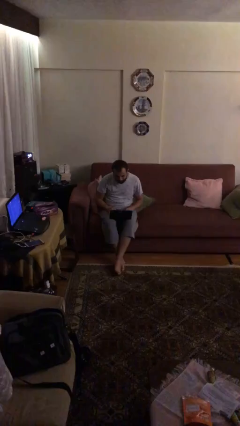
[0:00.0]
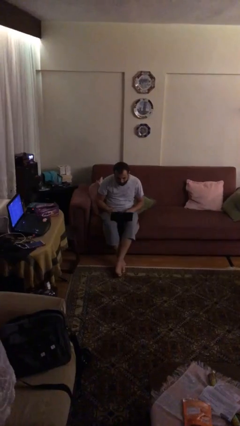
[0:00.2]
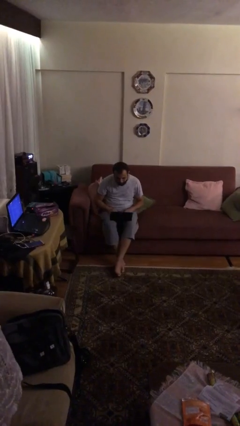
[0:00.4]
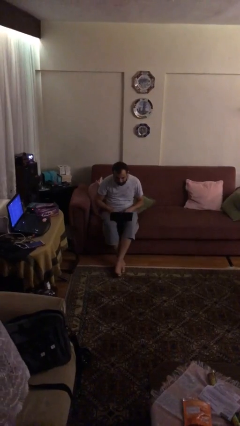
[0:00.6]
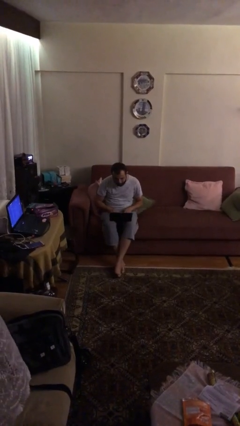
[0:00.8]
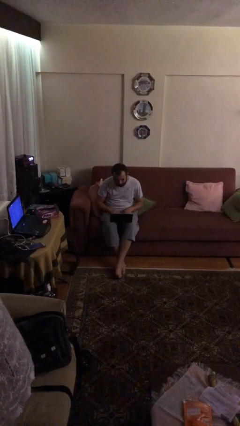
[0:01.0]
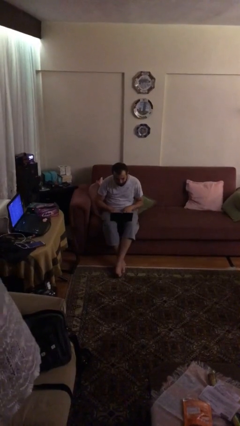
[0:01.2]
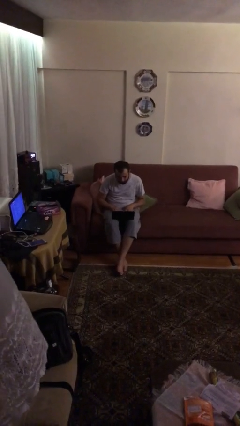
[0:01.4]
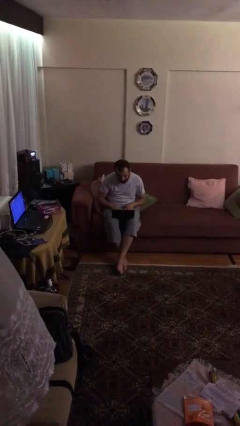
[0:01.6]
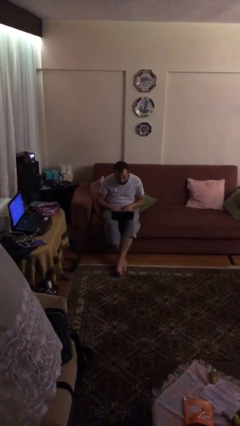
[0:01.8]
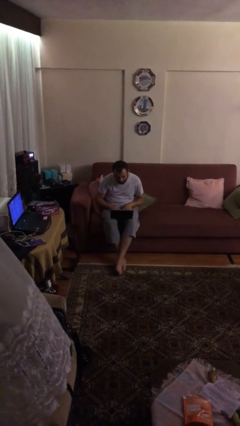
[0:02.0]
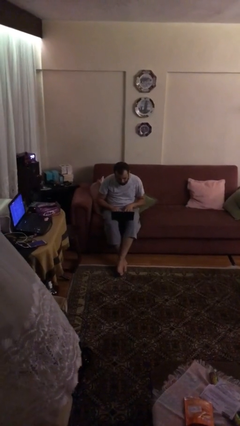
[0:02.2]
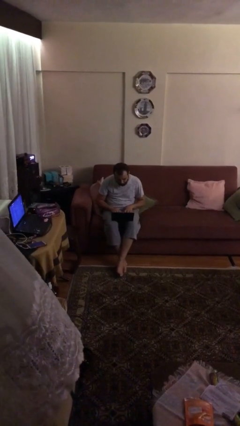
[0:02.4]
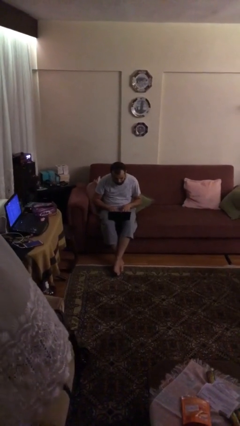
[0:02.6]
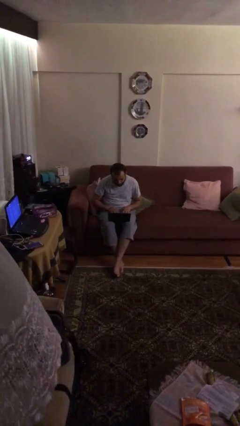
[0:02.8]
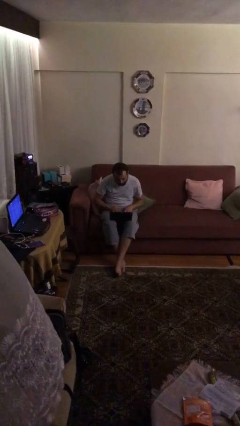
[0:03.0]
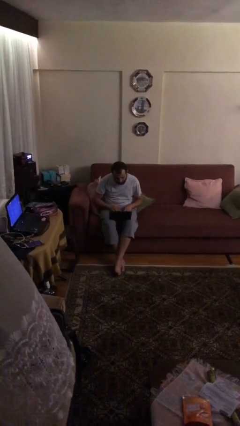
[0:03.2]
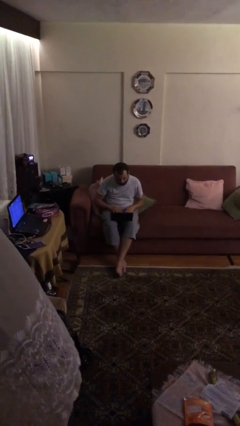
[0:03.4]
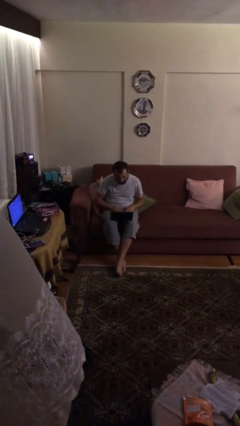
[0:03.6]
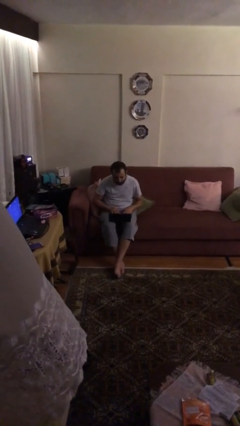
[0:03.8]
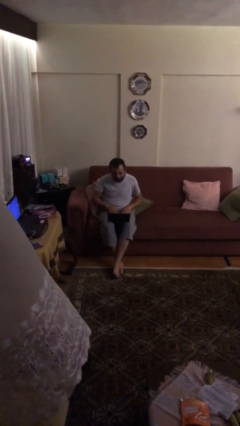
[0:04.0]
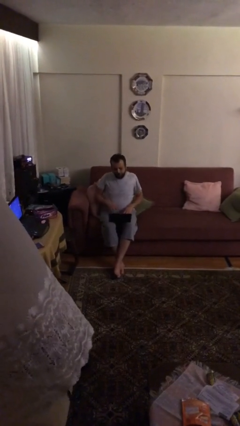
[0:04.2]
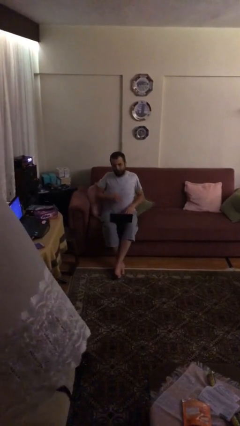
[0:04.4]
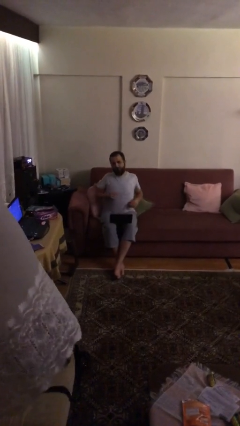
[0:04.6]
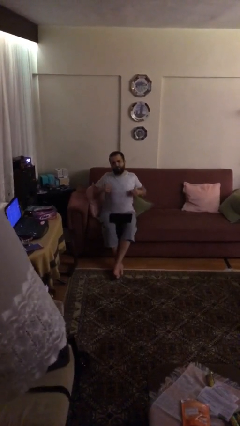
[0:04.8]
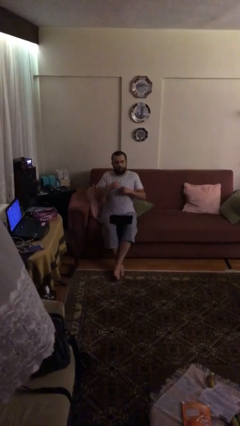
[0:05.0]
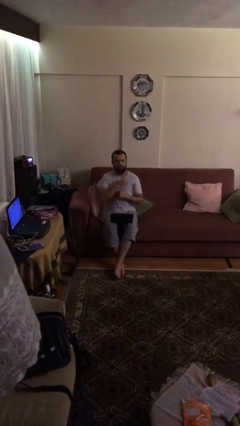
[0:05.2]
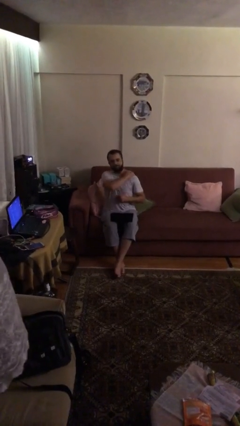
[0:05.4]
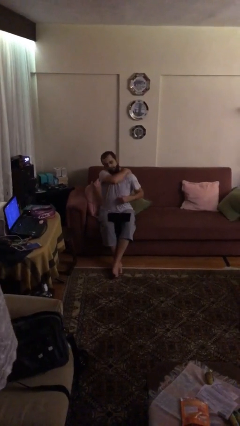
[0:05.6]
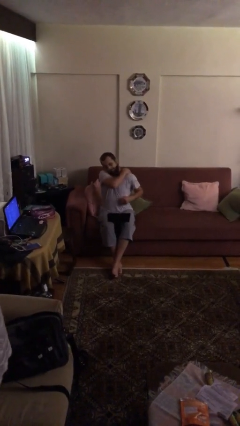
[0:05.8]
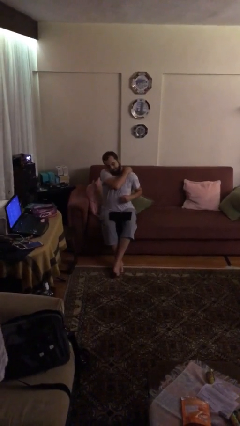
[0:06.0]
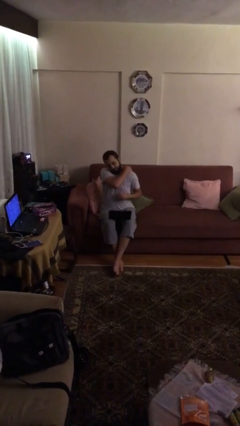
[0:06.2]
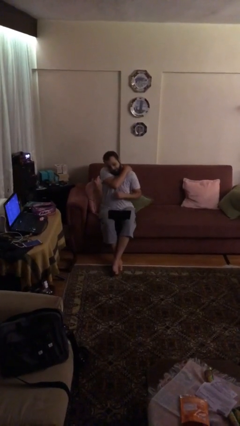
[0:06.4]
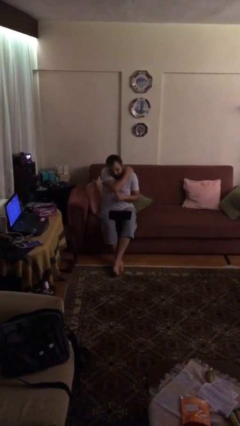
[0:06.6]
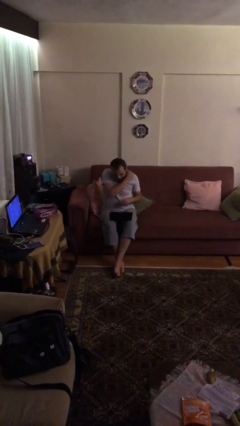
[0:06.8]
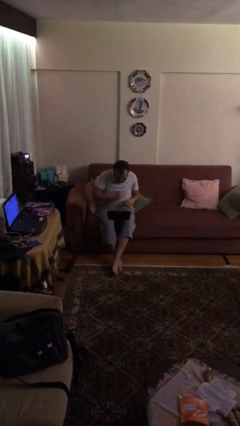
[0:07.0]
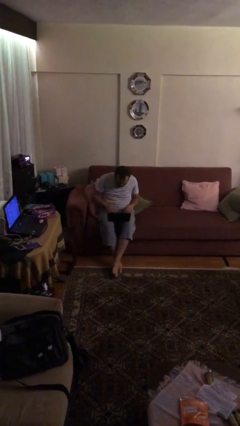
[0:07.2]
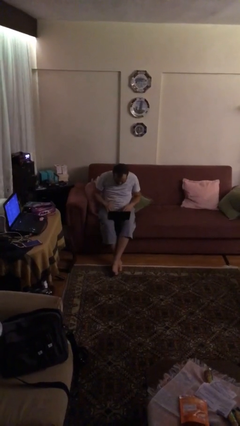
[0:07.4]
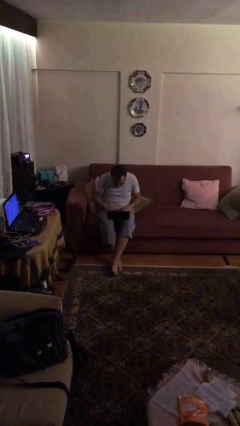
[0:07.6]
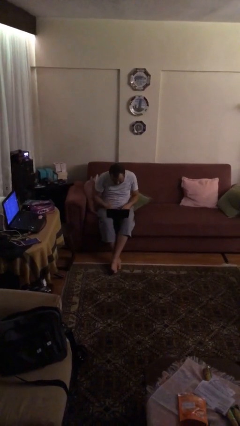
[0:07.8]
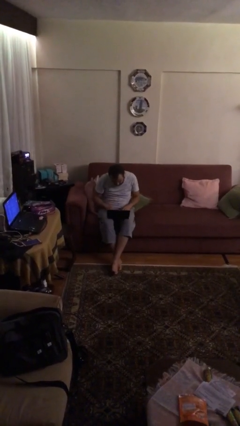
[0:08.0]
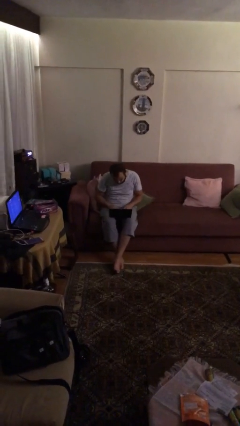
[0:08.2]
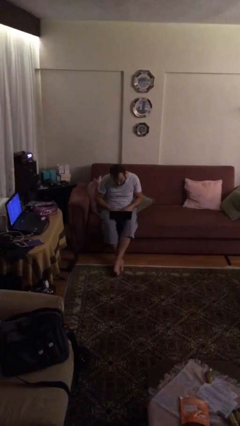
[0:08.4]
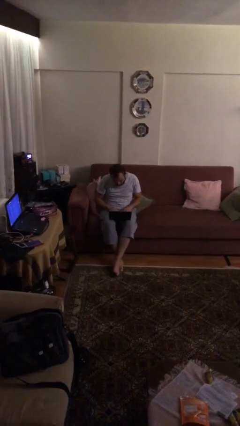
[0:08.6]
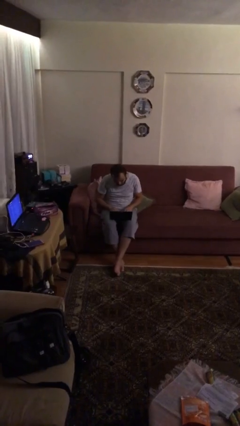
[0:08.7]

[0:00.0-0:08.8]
person interacts with laptop

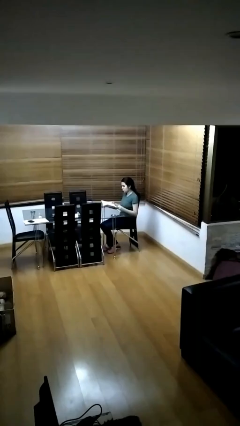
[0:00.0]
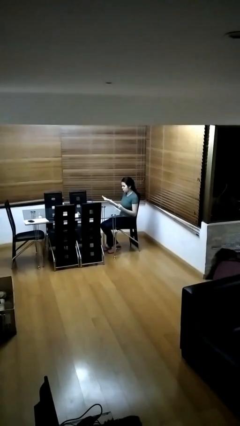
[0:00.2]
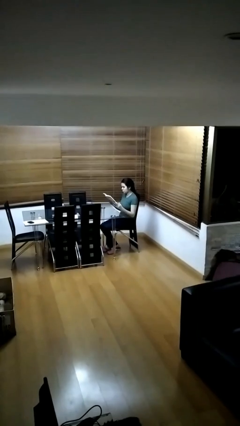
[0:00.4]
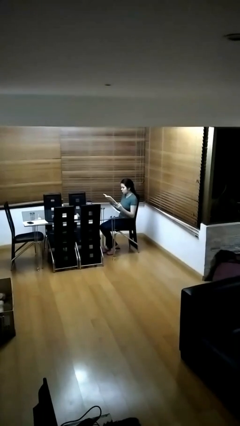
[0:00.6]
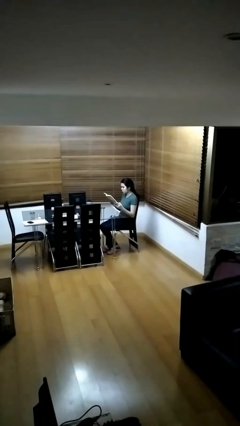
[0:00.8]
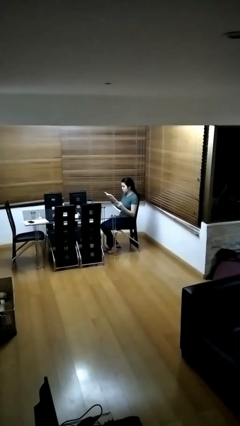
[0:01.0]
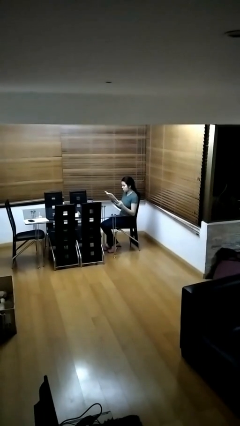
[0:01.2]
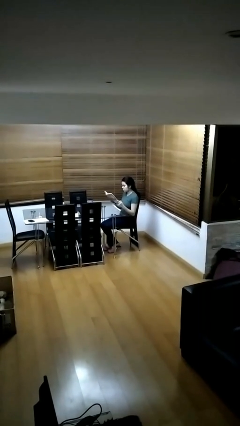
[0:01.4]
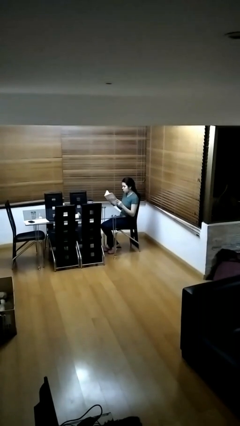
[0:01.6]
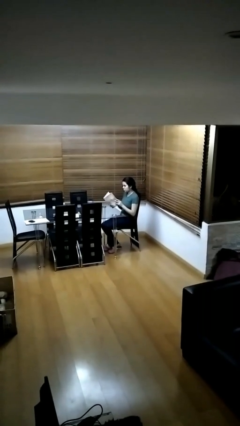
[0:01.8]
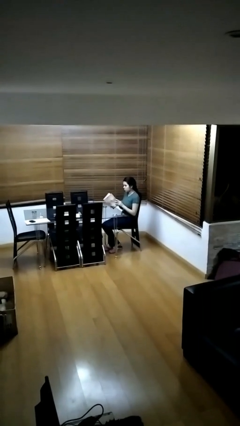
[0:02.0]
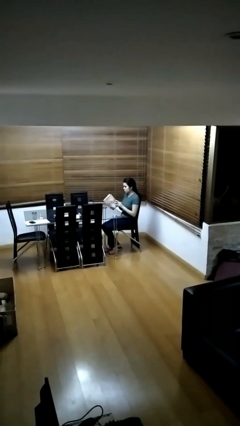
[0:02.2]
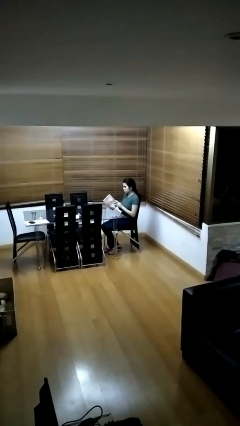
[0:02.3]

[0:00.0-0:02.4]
person reads document

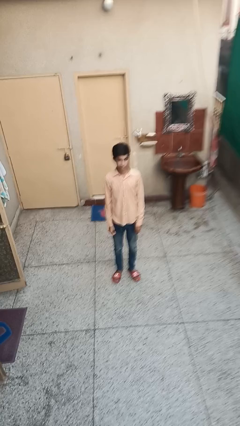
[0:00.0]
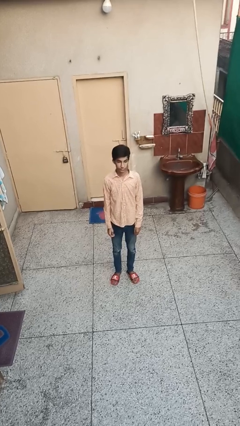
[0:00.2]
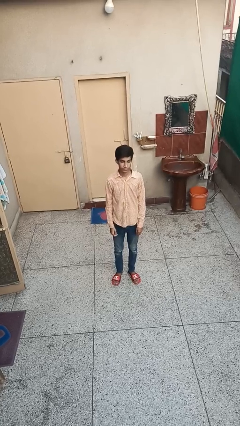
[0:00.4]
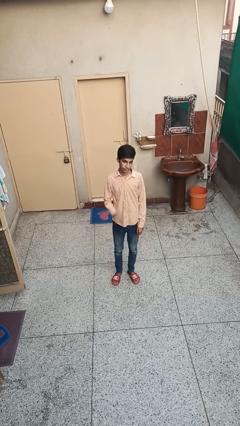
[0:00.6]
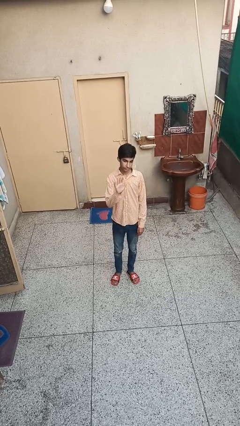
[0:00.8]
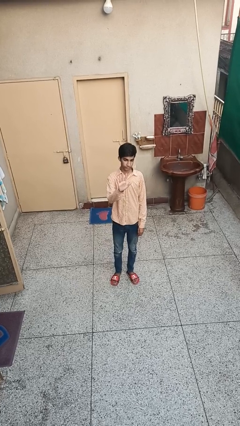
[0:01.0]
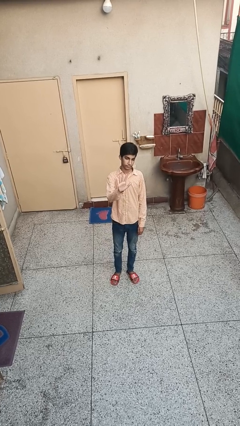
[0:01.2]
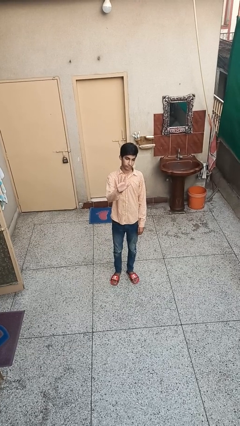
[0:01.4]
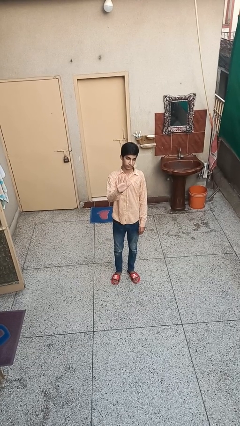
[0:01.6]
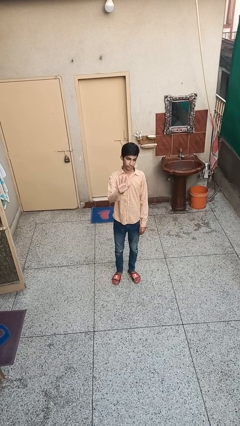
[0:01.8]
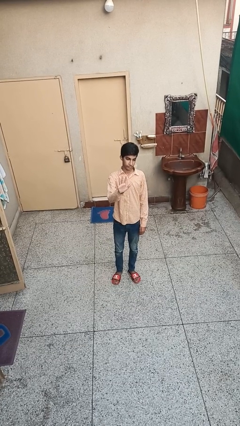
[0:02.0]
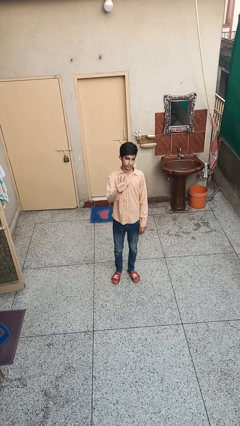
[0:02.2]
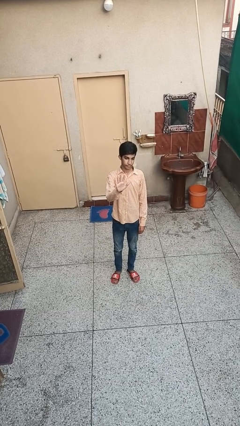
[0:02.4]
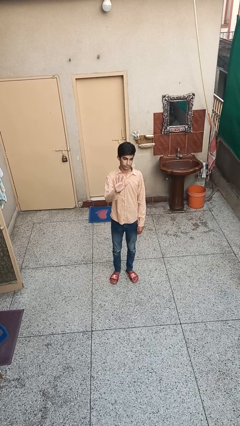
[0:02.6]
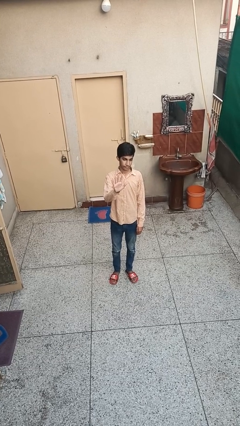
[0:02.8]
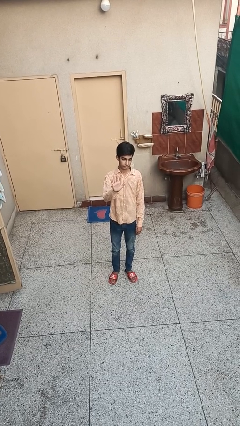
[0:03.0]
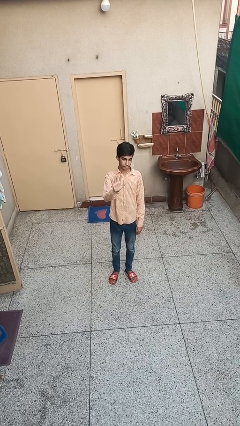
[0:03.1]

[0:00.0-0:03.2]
person gestures number five

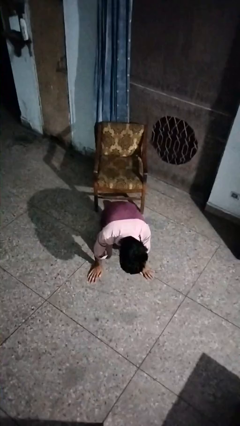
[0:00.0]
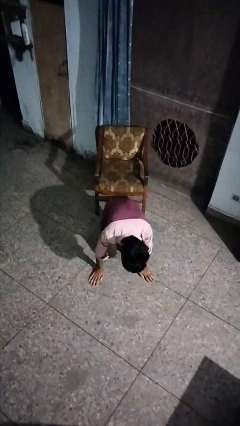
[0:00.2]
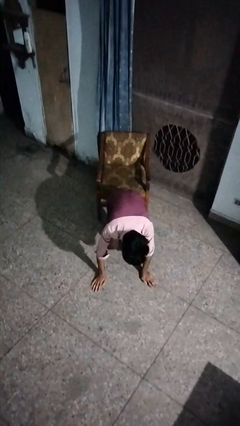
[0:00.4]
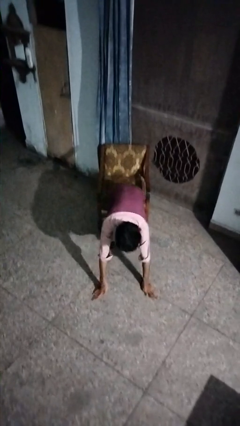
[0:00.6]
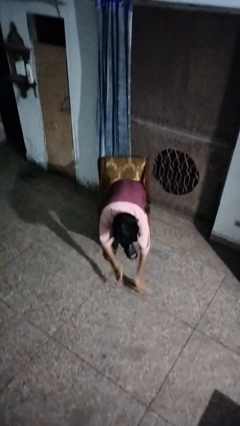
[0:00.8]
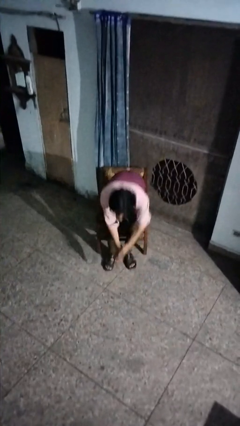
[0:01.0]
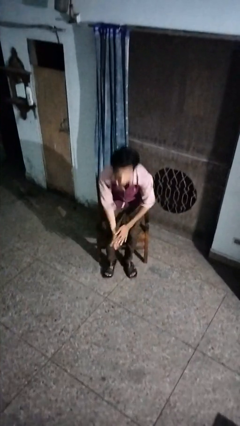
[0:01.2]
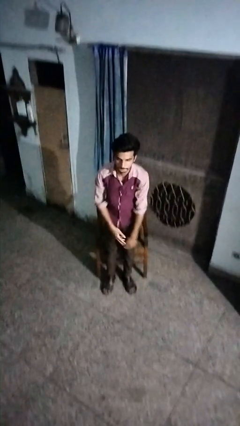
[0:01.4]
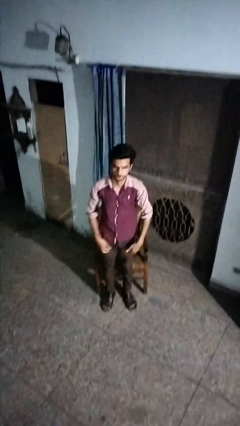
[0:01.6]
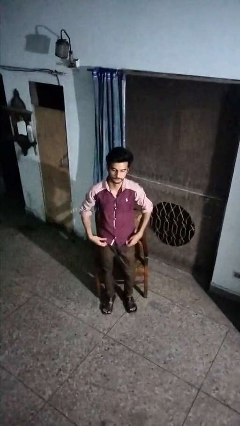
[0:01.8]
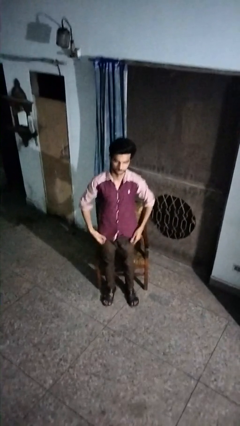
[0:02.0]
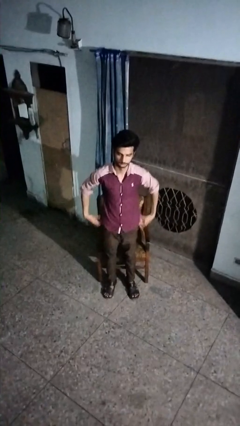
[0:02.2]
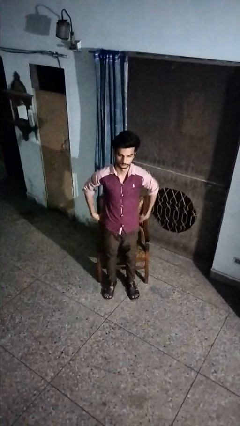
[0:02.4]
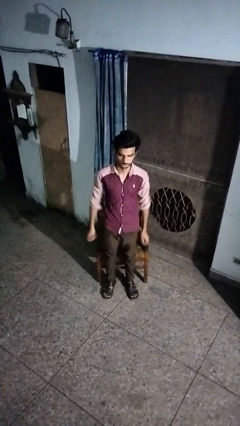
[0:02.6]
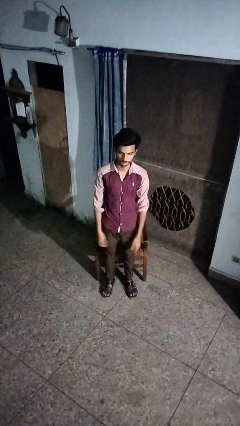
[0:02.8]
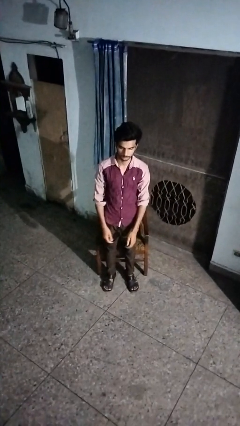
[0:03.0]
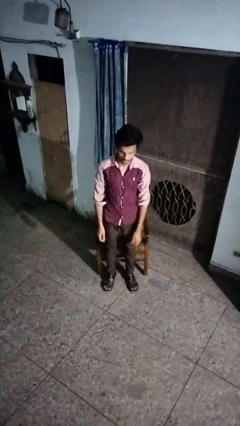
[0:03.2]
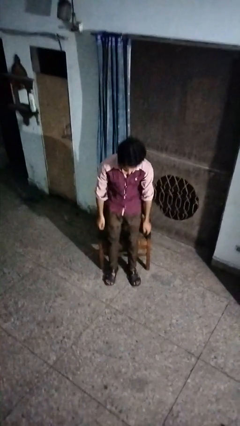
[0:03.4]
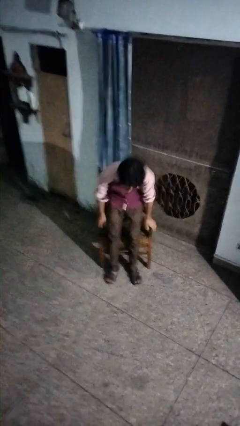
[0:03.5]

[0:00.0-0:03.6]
person stands up from floor
